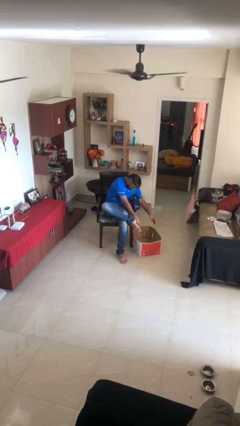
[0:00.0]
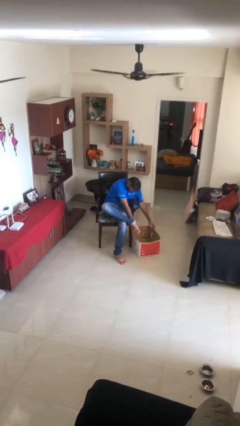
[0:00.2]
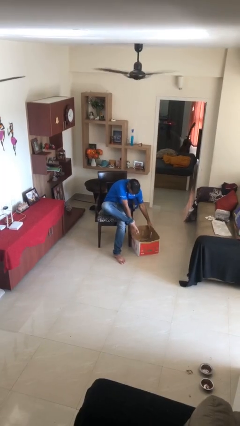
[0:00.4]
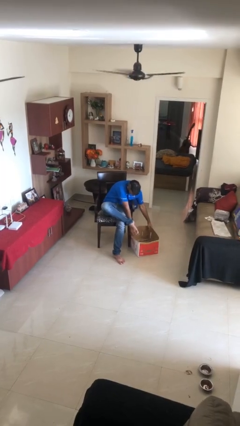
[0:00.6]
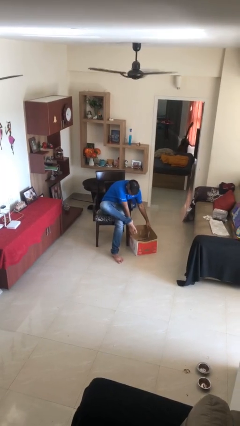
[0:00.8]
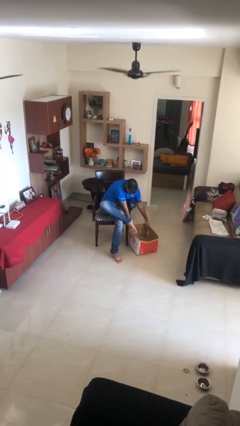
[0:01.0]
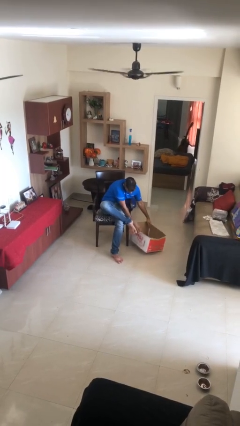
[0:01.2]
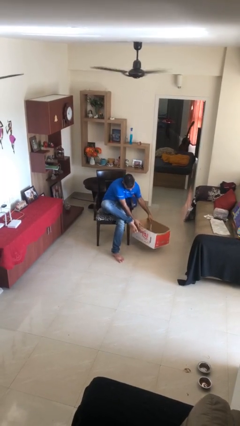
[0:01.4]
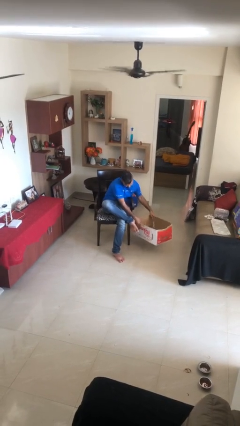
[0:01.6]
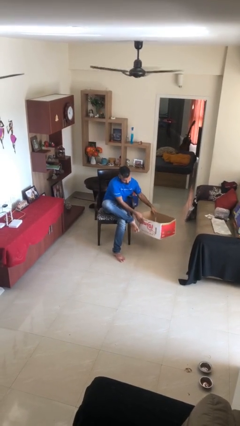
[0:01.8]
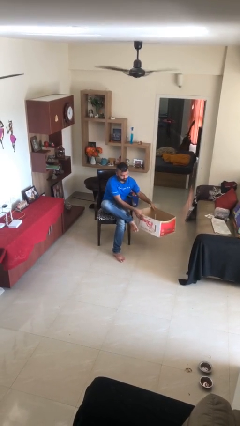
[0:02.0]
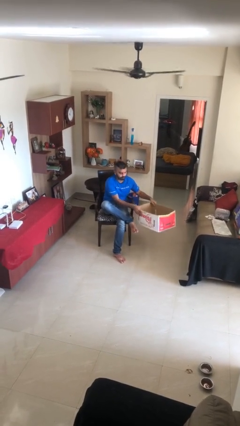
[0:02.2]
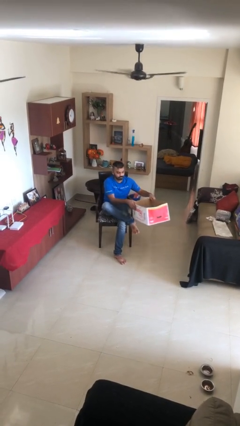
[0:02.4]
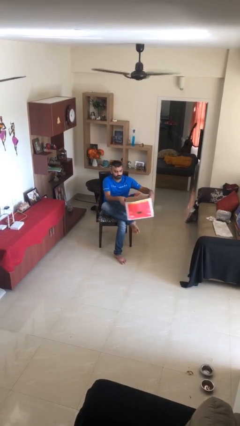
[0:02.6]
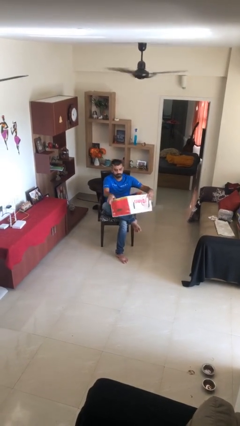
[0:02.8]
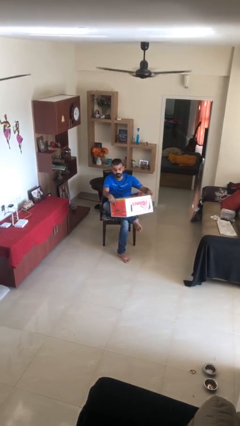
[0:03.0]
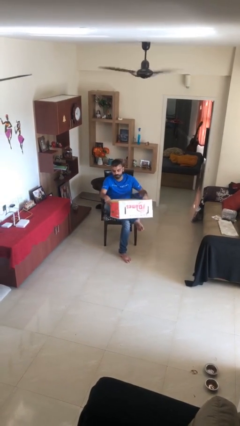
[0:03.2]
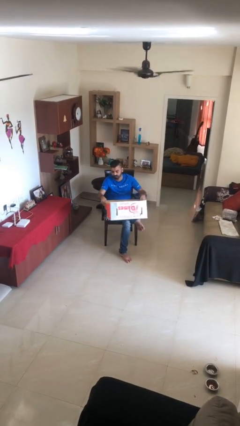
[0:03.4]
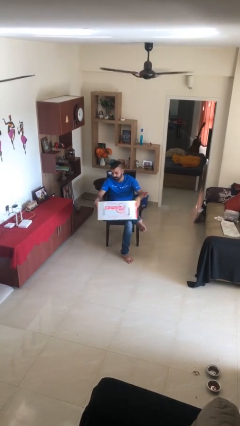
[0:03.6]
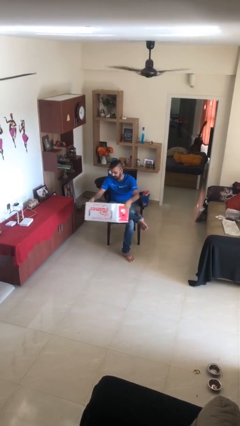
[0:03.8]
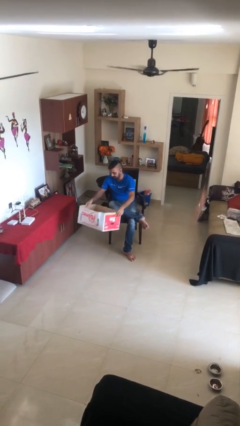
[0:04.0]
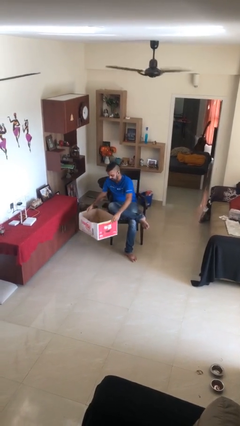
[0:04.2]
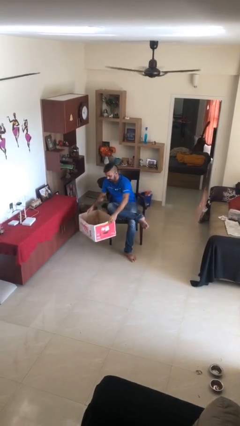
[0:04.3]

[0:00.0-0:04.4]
person picks up object from floor

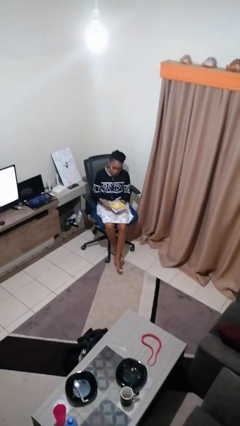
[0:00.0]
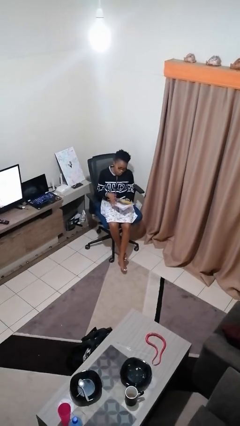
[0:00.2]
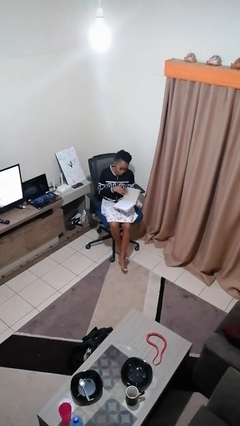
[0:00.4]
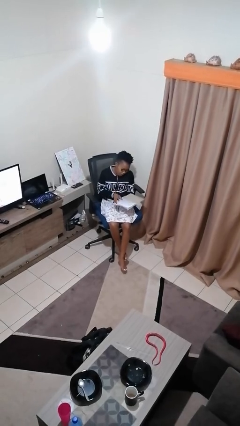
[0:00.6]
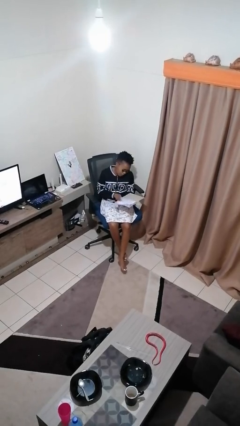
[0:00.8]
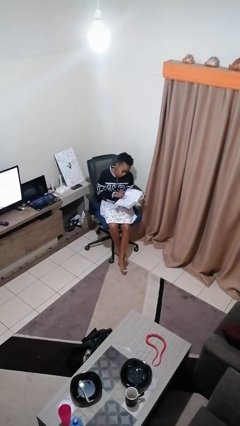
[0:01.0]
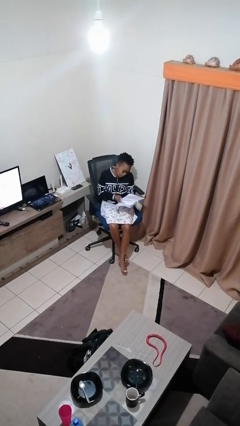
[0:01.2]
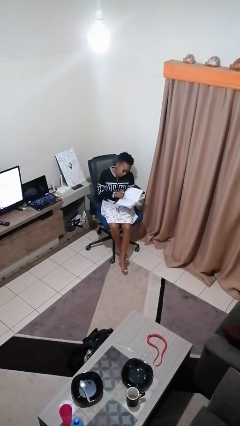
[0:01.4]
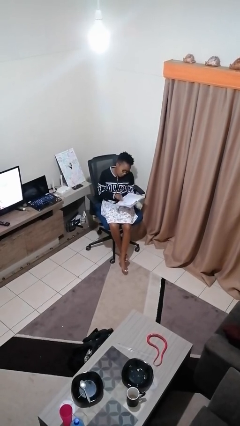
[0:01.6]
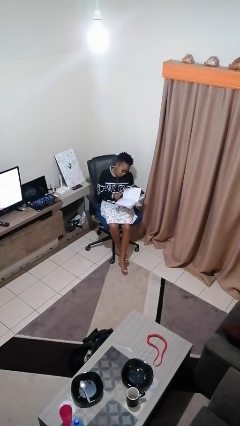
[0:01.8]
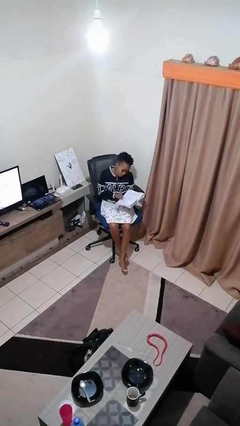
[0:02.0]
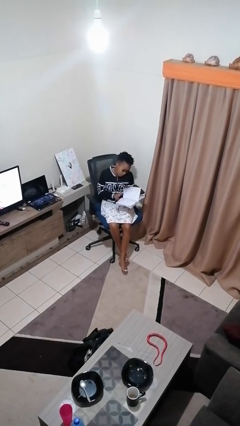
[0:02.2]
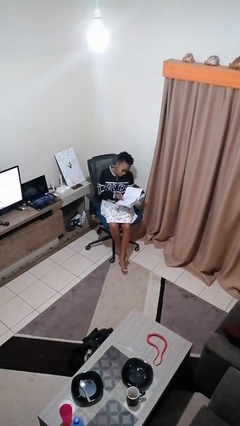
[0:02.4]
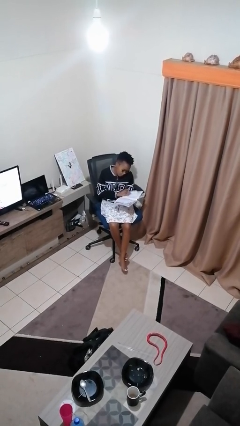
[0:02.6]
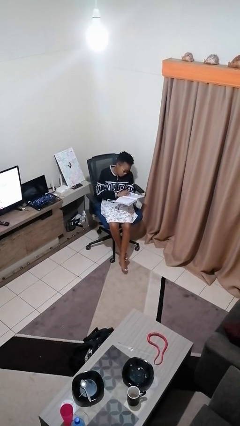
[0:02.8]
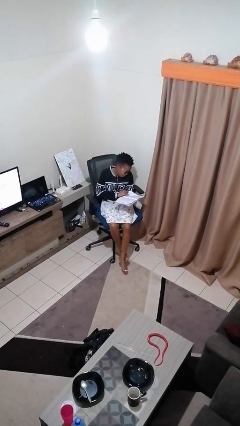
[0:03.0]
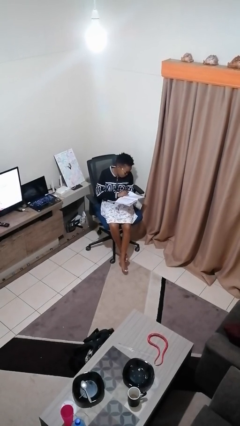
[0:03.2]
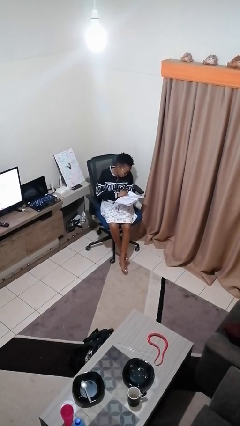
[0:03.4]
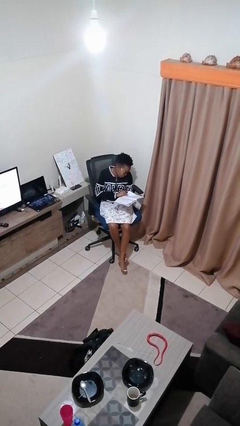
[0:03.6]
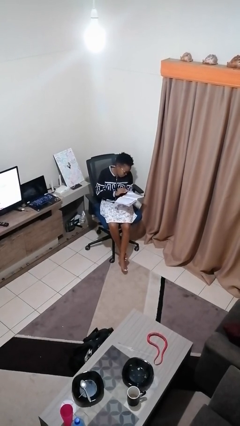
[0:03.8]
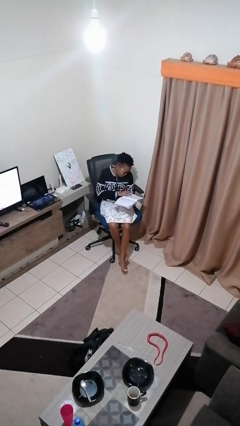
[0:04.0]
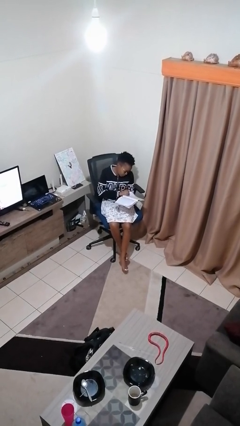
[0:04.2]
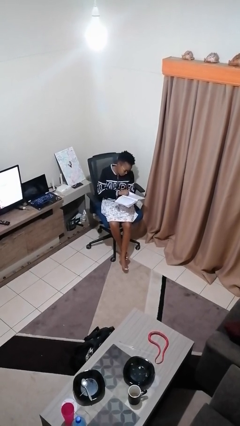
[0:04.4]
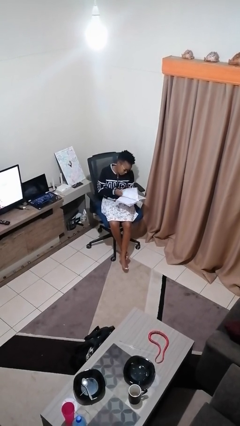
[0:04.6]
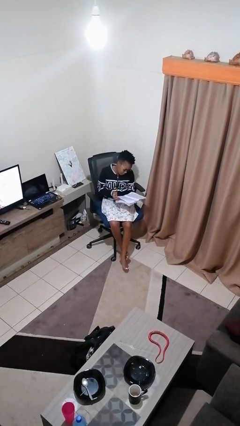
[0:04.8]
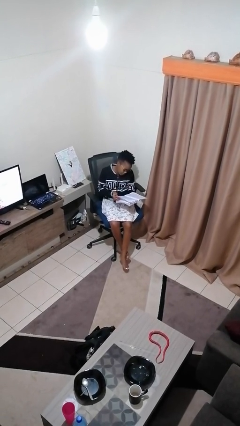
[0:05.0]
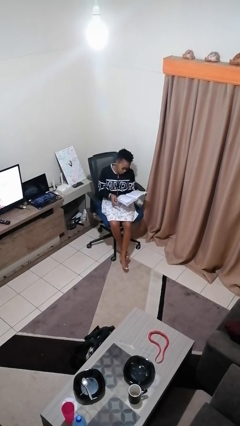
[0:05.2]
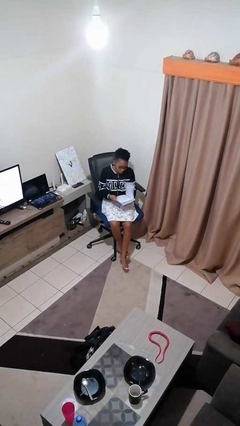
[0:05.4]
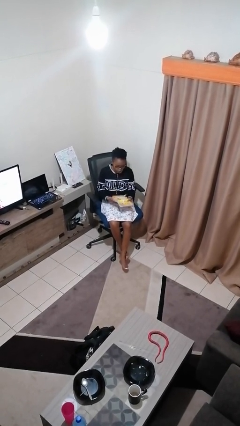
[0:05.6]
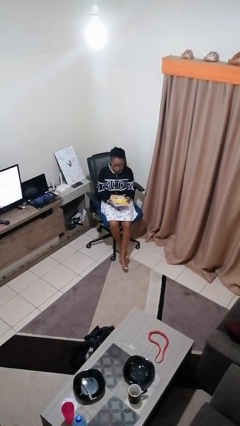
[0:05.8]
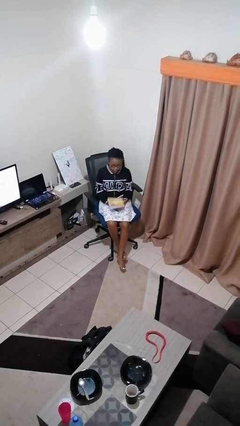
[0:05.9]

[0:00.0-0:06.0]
person reads book

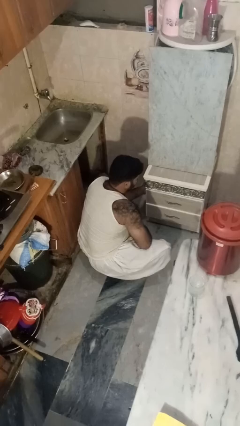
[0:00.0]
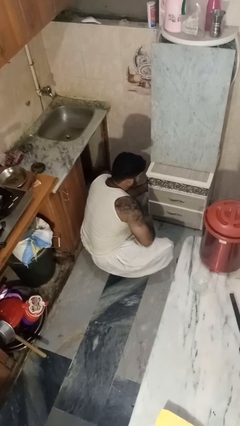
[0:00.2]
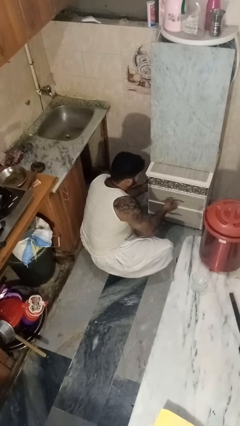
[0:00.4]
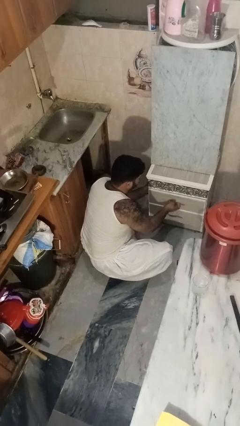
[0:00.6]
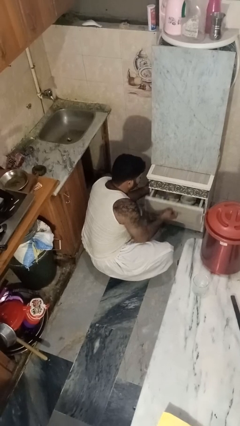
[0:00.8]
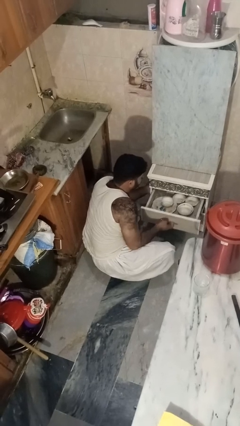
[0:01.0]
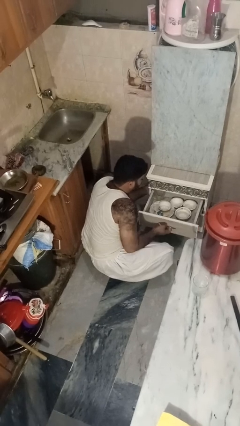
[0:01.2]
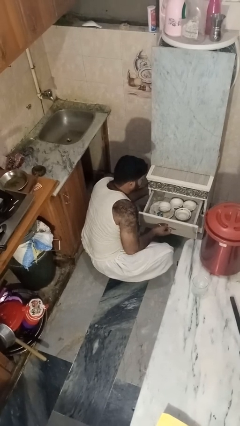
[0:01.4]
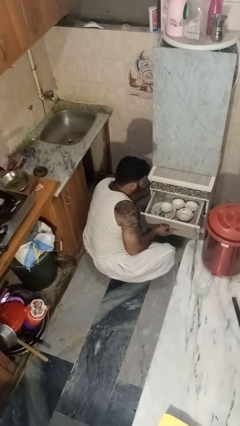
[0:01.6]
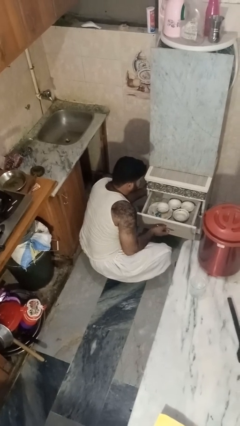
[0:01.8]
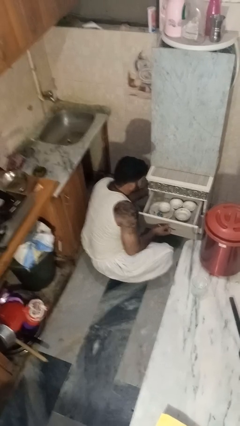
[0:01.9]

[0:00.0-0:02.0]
person opens kitchen drawer

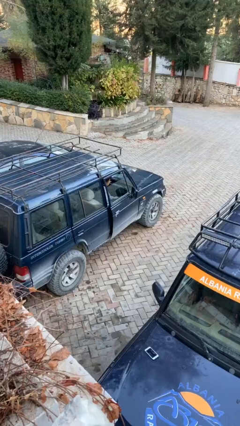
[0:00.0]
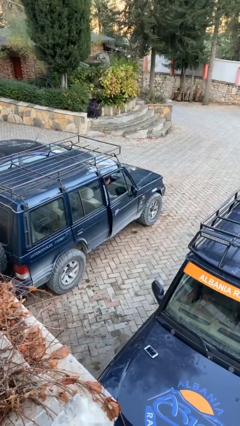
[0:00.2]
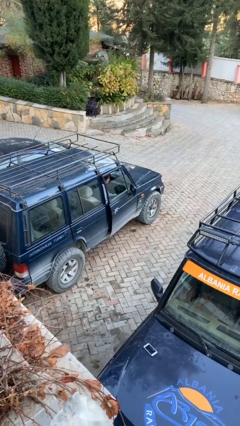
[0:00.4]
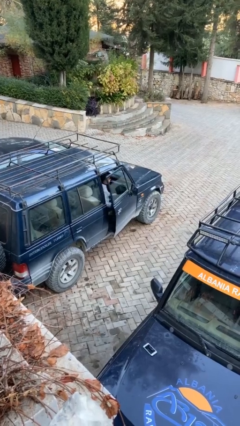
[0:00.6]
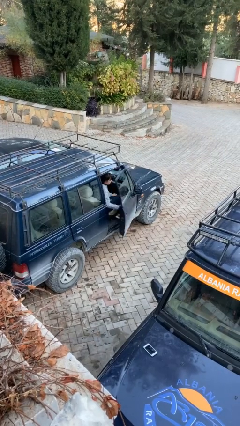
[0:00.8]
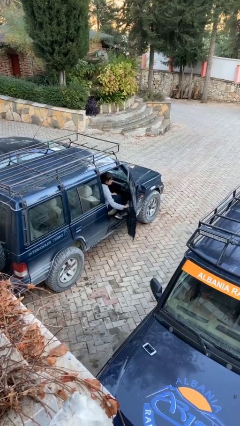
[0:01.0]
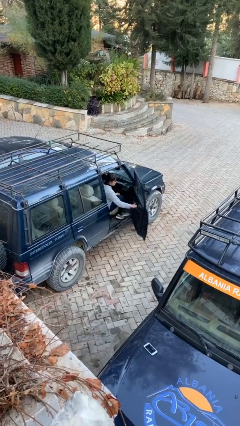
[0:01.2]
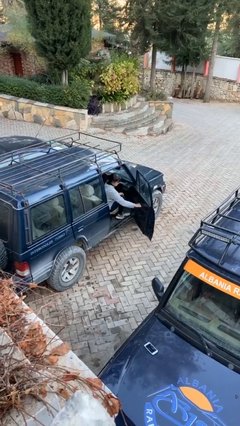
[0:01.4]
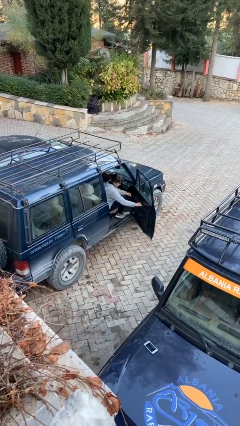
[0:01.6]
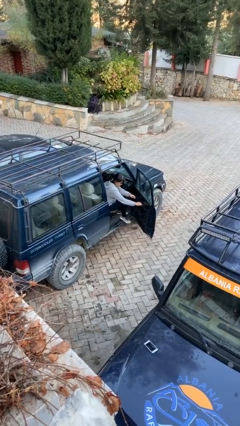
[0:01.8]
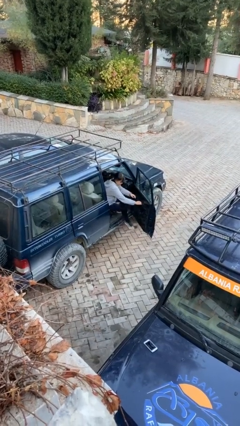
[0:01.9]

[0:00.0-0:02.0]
person opens car door

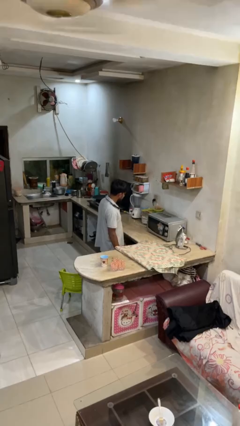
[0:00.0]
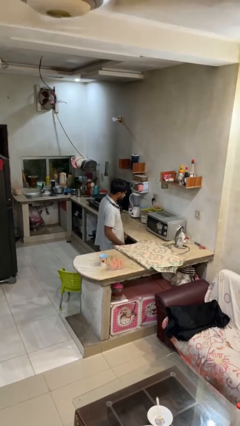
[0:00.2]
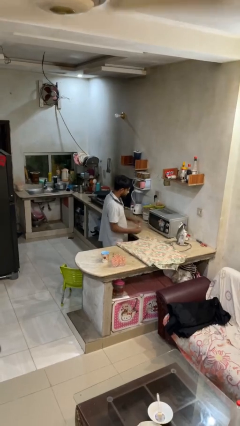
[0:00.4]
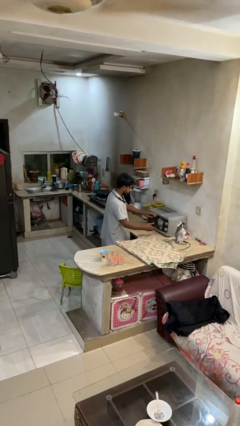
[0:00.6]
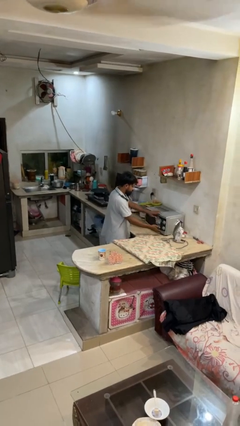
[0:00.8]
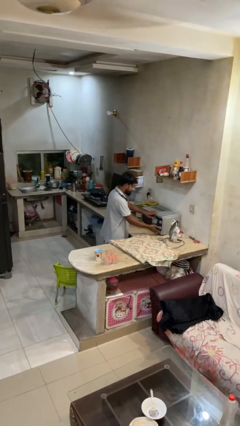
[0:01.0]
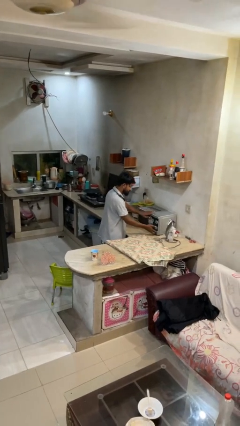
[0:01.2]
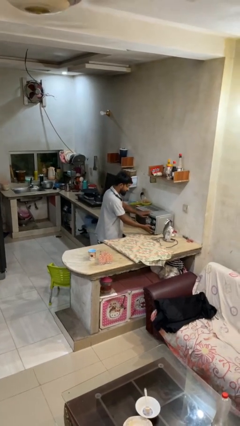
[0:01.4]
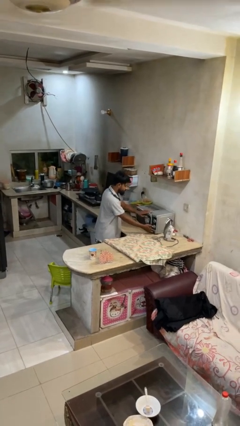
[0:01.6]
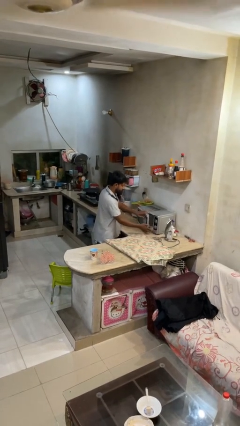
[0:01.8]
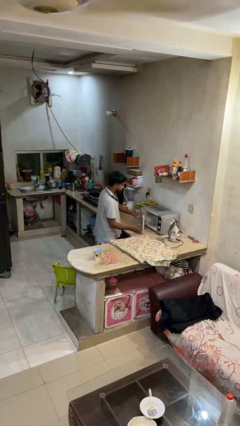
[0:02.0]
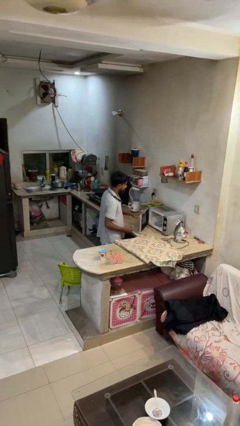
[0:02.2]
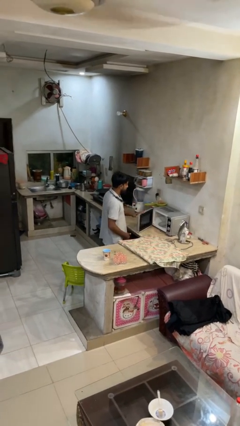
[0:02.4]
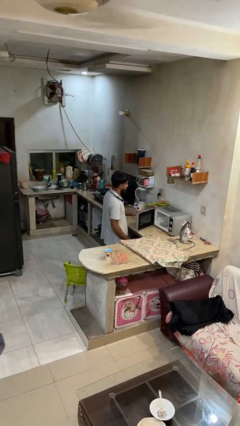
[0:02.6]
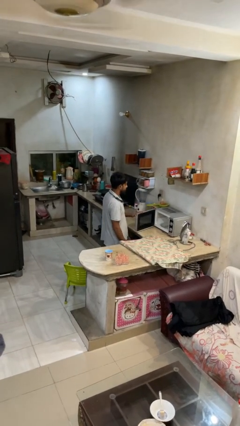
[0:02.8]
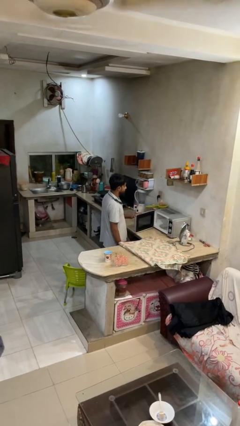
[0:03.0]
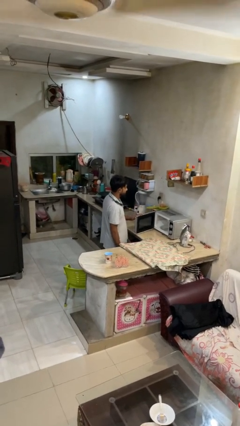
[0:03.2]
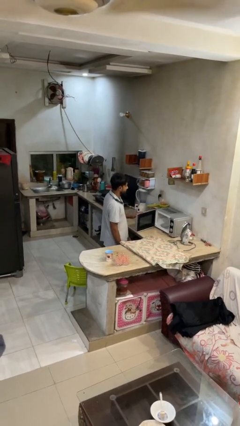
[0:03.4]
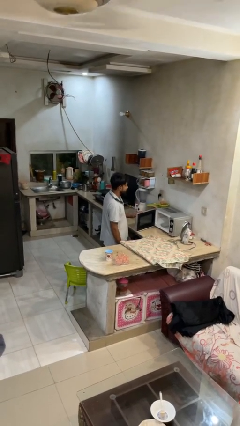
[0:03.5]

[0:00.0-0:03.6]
person opens microwave

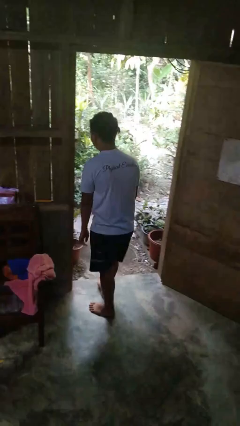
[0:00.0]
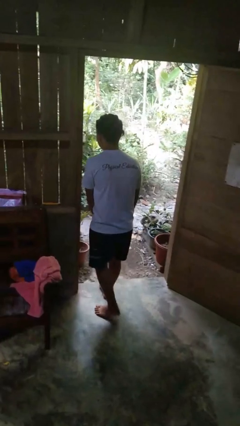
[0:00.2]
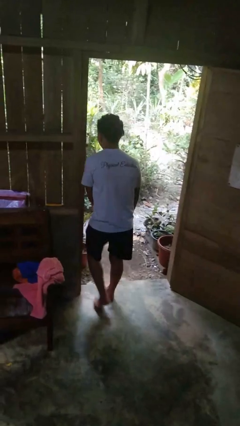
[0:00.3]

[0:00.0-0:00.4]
person bumps into wall
